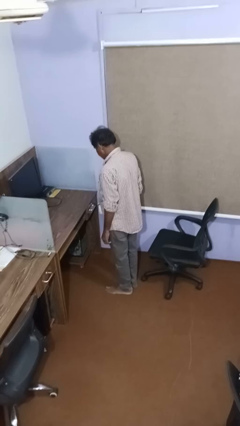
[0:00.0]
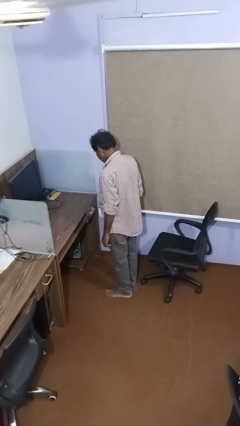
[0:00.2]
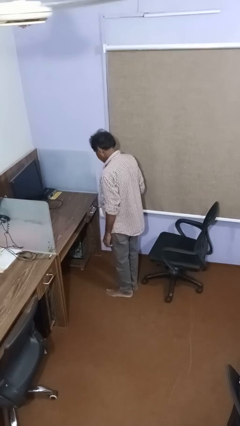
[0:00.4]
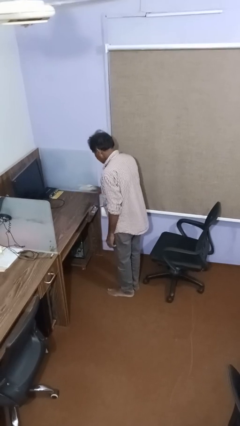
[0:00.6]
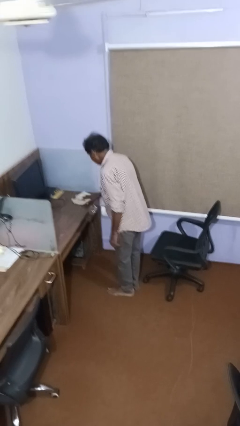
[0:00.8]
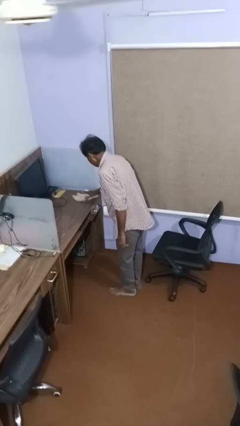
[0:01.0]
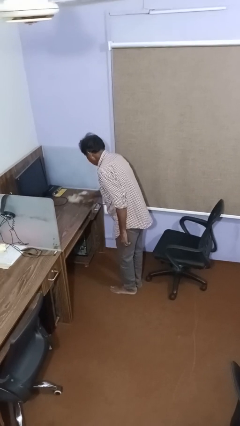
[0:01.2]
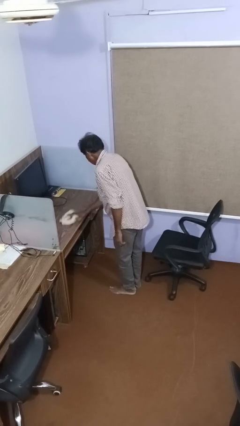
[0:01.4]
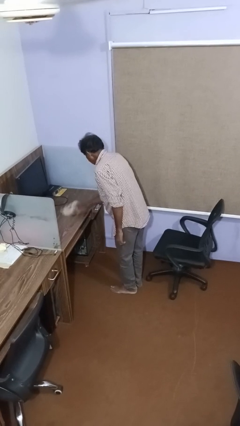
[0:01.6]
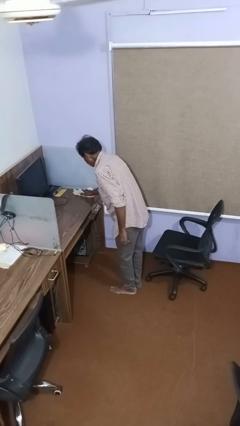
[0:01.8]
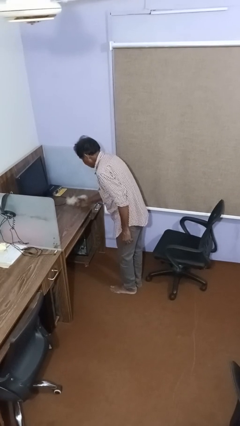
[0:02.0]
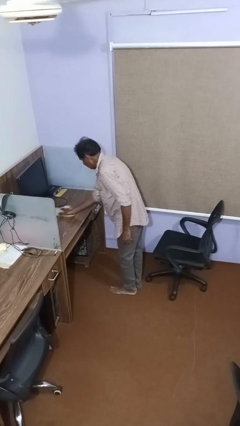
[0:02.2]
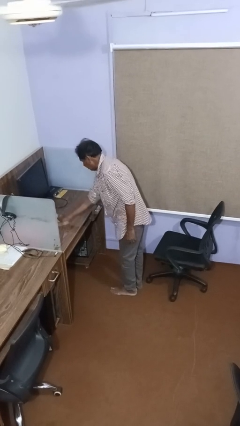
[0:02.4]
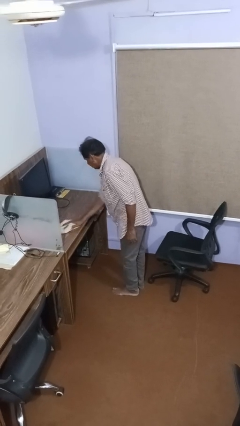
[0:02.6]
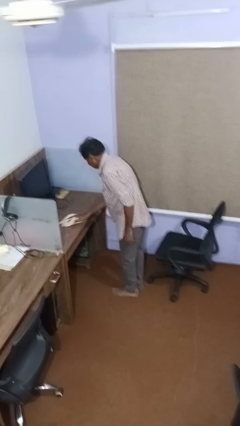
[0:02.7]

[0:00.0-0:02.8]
person dusts furniture

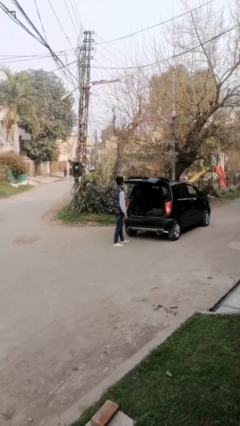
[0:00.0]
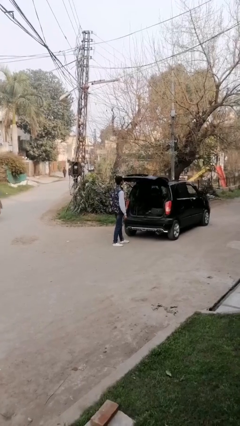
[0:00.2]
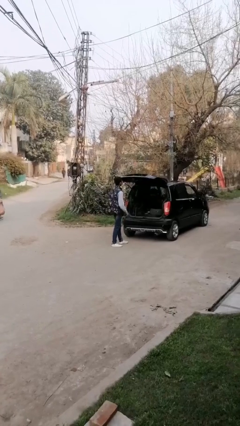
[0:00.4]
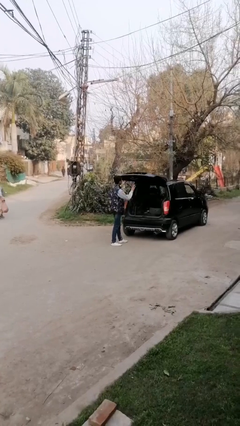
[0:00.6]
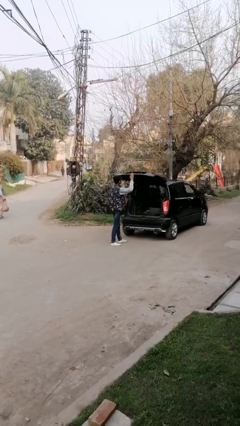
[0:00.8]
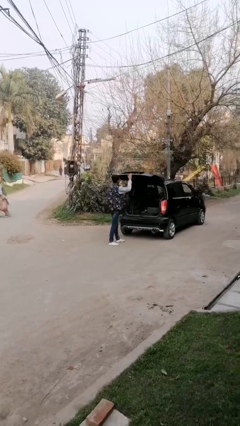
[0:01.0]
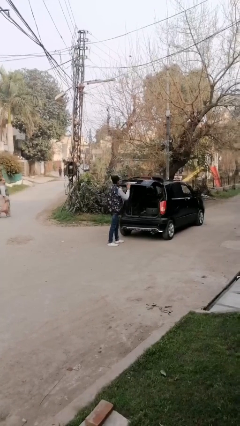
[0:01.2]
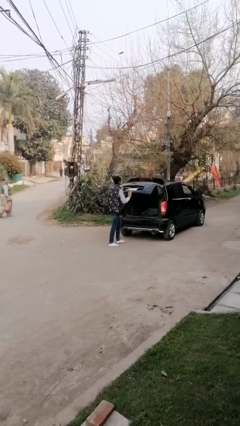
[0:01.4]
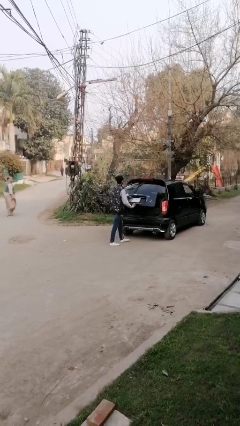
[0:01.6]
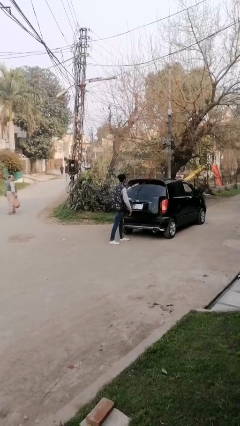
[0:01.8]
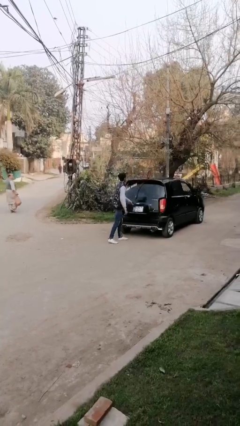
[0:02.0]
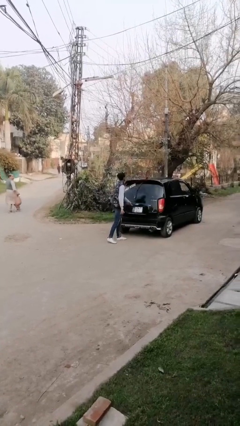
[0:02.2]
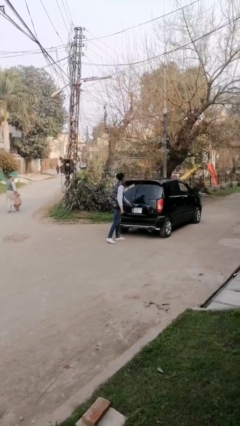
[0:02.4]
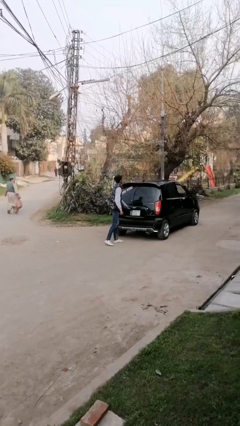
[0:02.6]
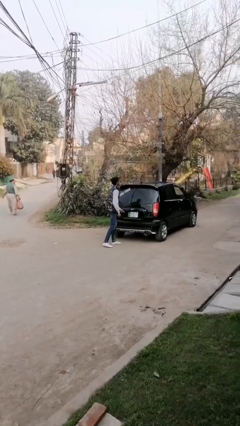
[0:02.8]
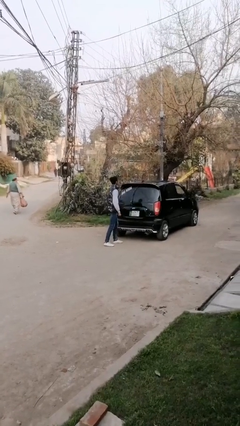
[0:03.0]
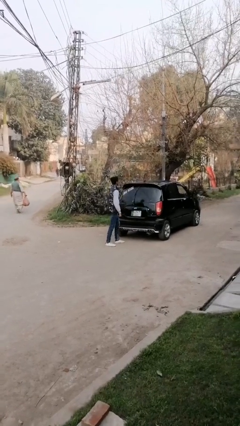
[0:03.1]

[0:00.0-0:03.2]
person opens car trunk

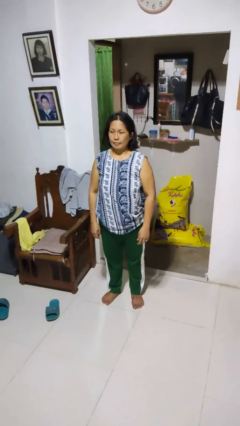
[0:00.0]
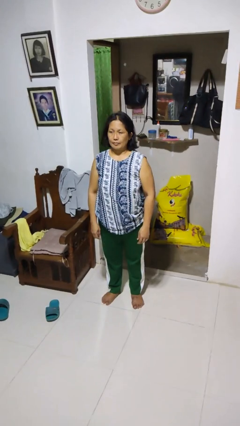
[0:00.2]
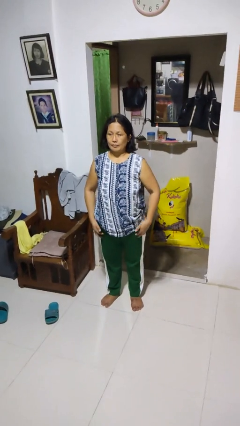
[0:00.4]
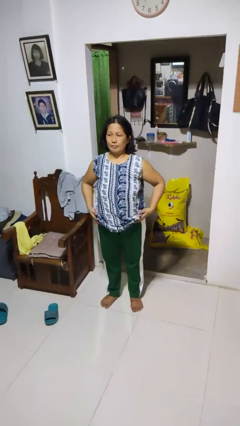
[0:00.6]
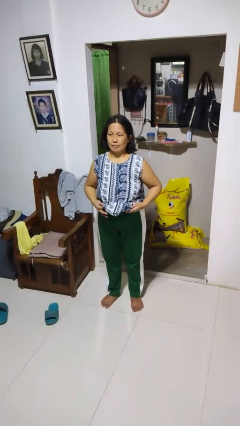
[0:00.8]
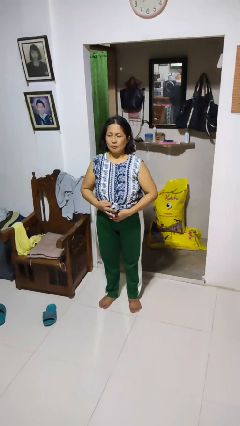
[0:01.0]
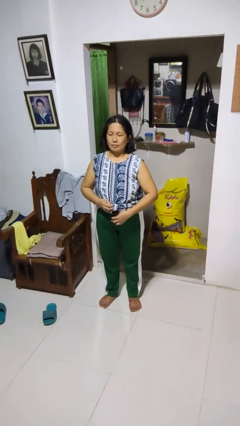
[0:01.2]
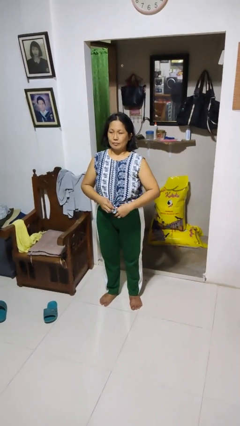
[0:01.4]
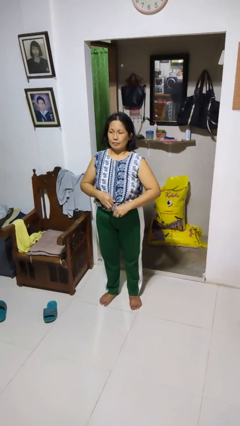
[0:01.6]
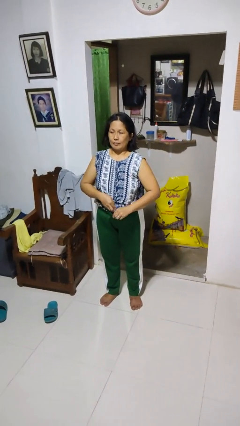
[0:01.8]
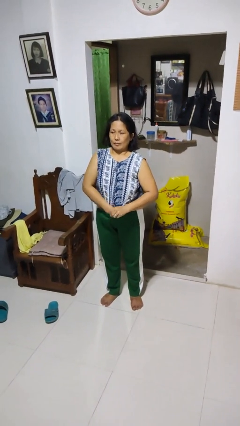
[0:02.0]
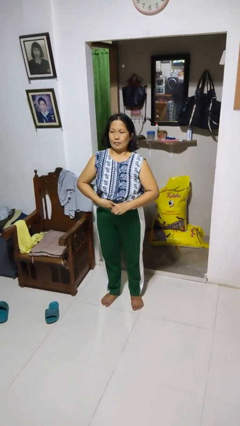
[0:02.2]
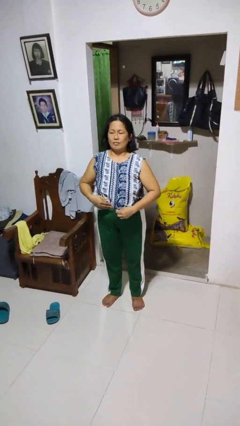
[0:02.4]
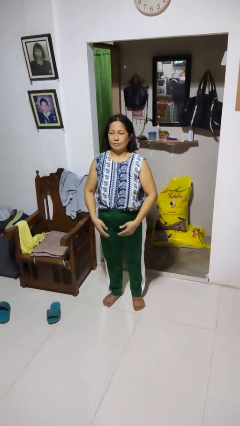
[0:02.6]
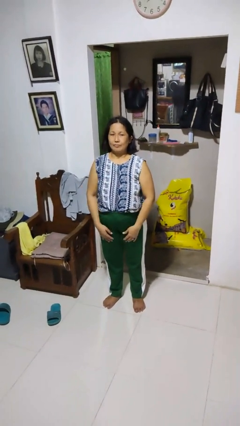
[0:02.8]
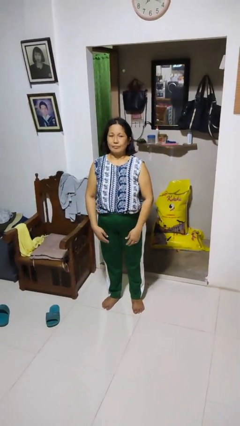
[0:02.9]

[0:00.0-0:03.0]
person tucks in shirt

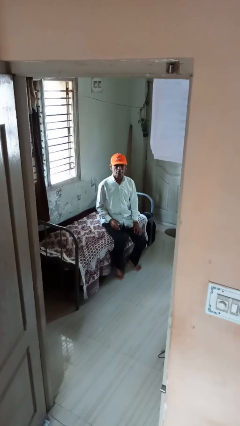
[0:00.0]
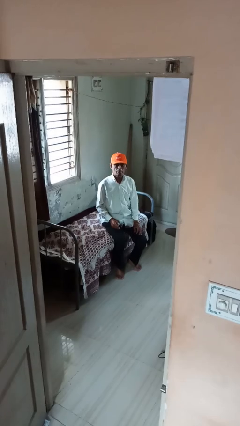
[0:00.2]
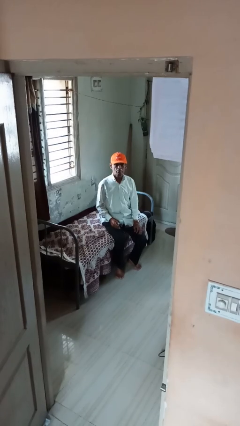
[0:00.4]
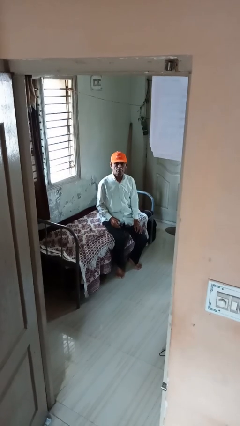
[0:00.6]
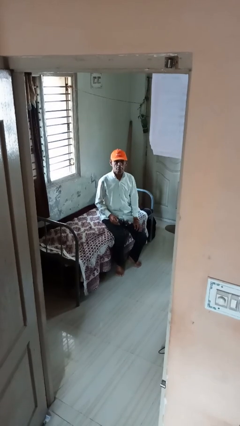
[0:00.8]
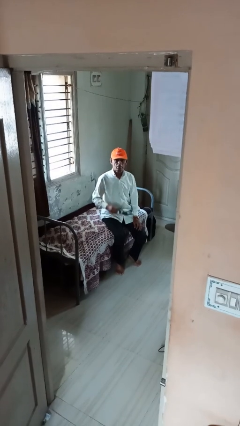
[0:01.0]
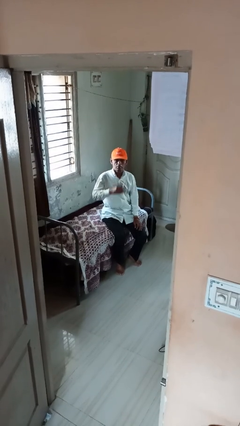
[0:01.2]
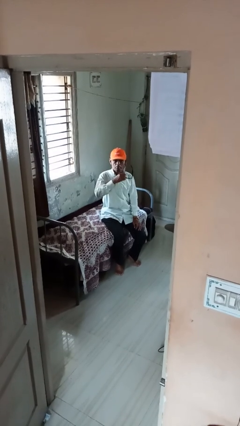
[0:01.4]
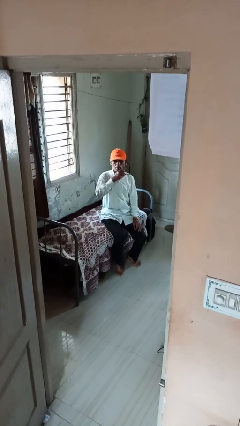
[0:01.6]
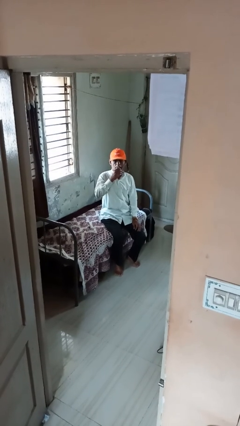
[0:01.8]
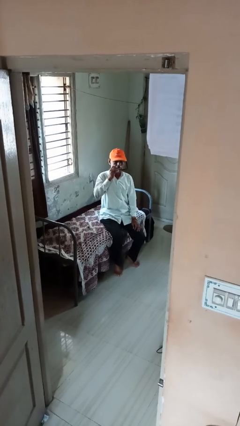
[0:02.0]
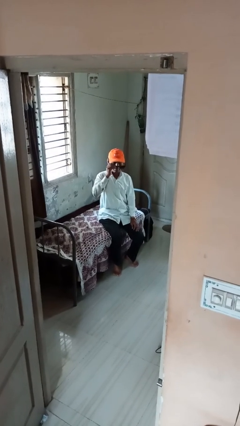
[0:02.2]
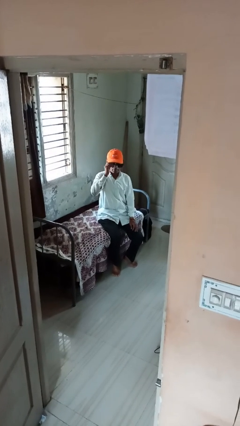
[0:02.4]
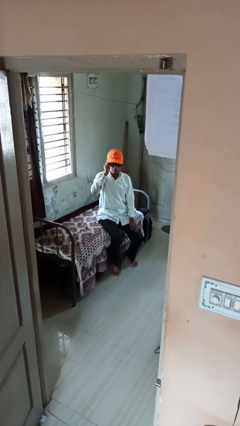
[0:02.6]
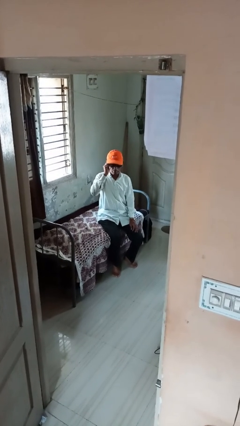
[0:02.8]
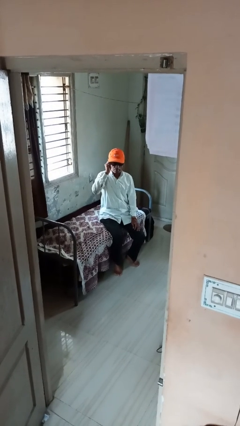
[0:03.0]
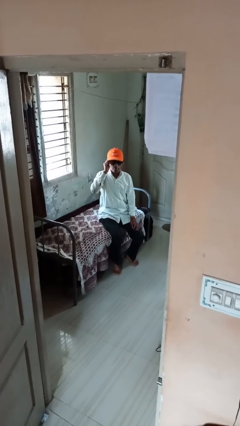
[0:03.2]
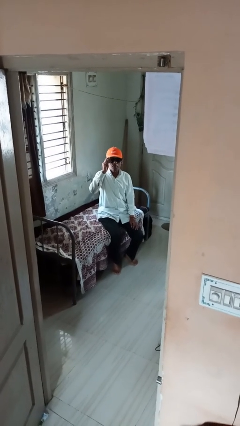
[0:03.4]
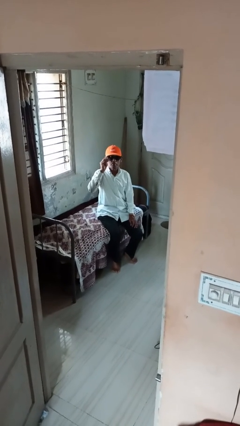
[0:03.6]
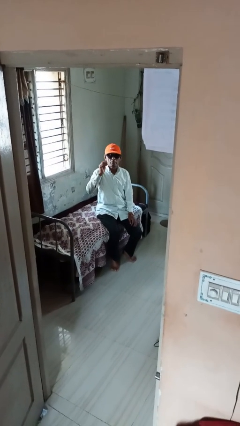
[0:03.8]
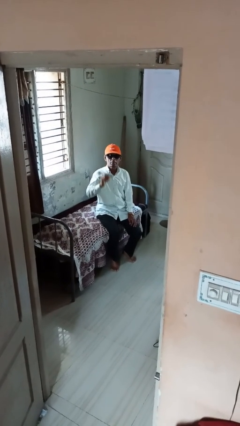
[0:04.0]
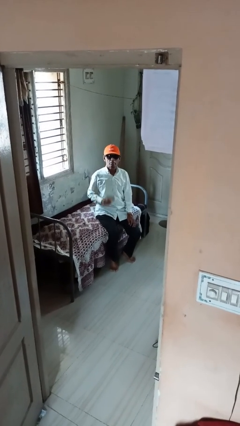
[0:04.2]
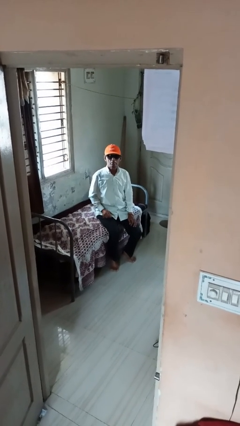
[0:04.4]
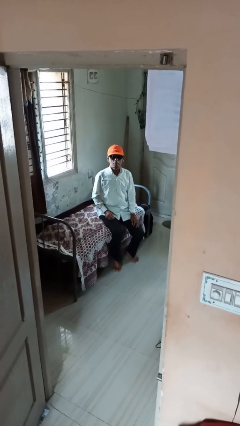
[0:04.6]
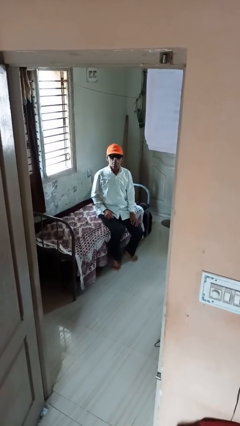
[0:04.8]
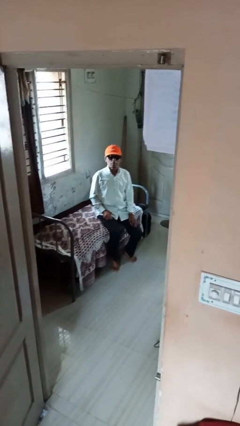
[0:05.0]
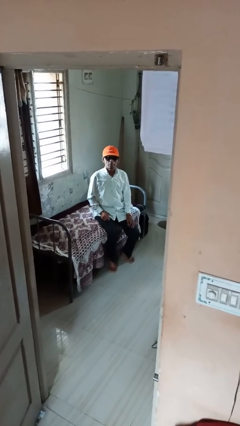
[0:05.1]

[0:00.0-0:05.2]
person puts on sunglasses

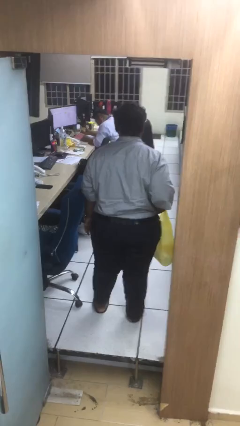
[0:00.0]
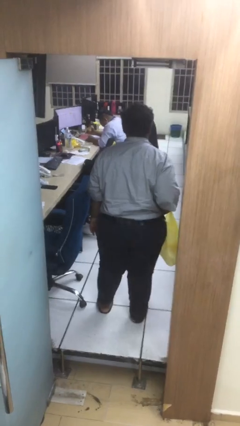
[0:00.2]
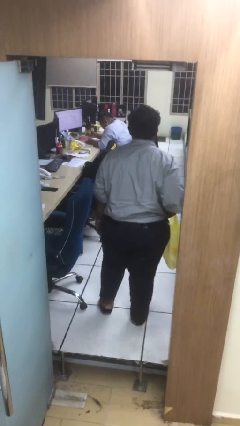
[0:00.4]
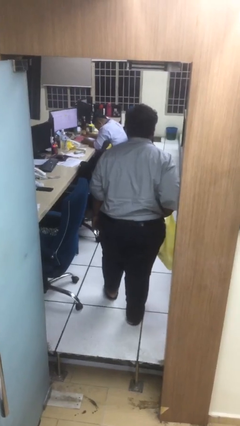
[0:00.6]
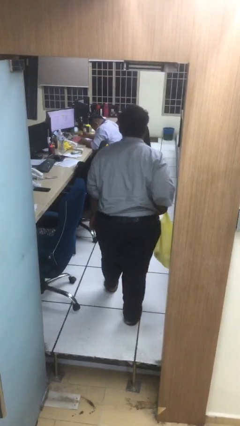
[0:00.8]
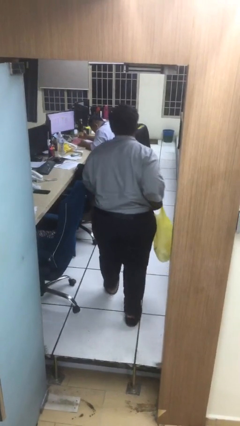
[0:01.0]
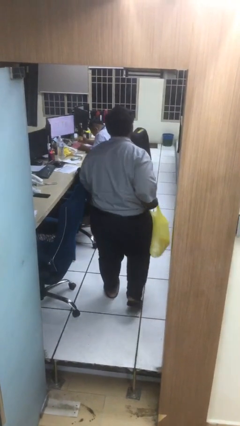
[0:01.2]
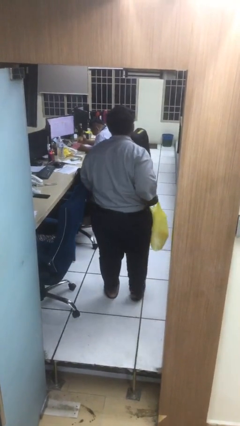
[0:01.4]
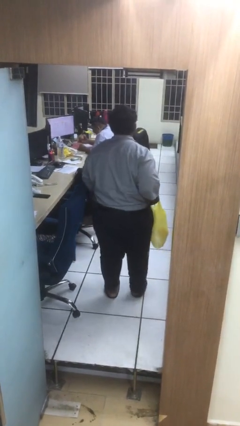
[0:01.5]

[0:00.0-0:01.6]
person carries groceries

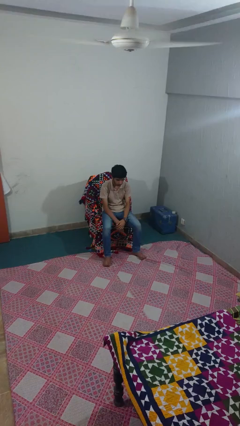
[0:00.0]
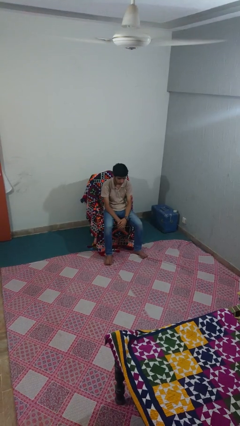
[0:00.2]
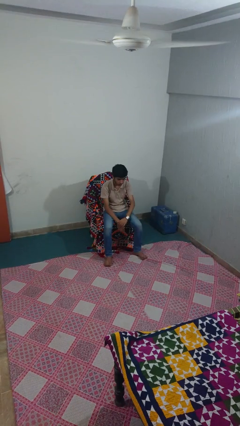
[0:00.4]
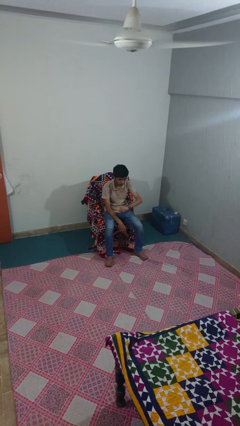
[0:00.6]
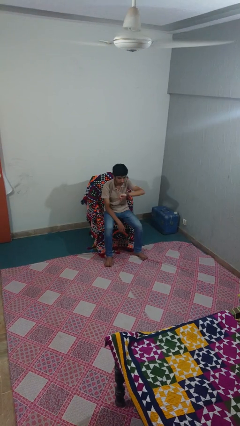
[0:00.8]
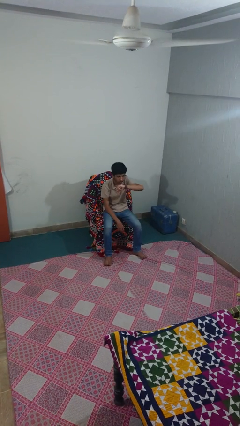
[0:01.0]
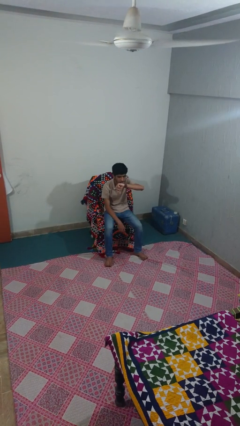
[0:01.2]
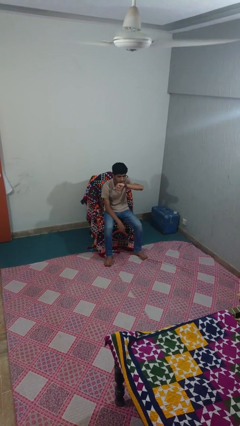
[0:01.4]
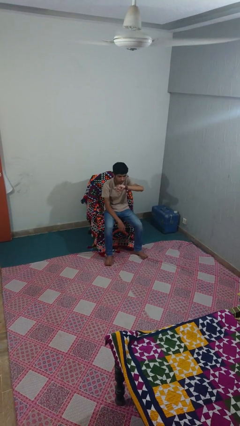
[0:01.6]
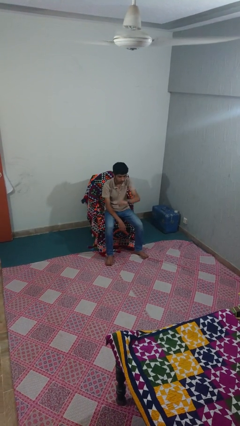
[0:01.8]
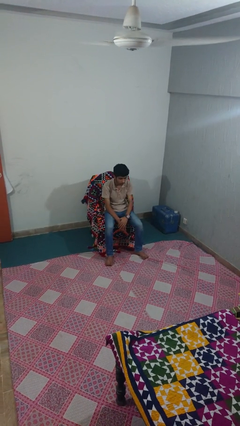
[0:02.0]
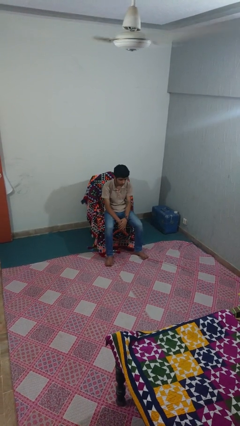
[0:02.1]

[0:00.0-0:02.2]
person looks at wristwatch
